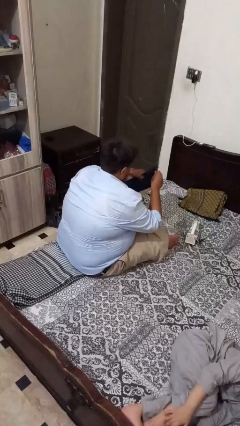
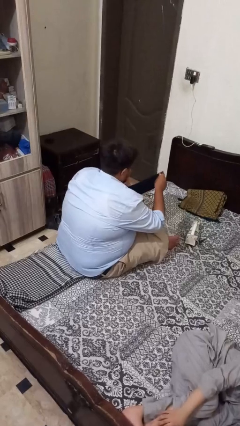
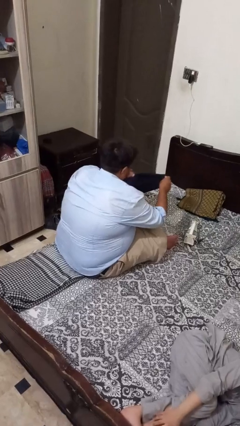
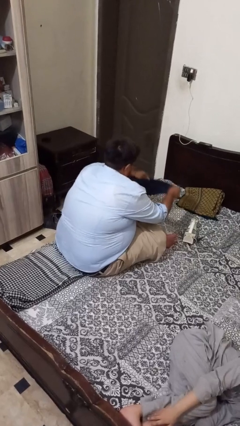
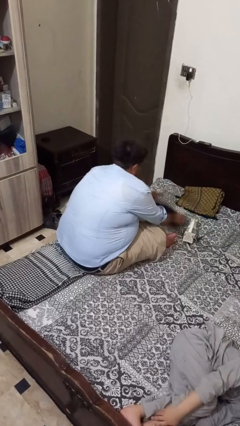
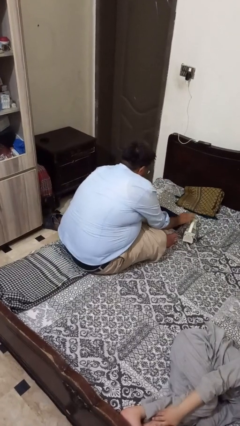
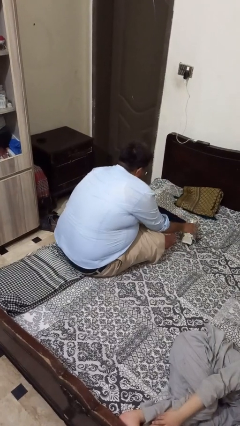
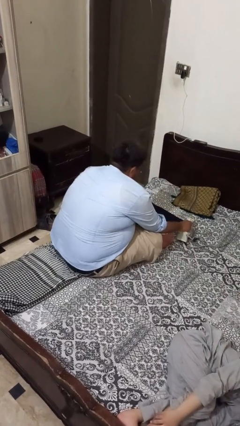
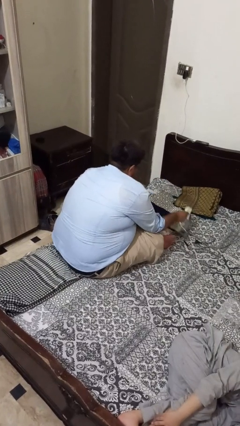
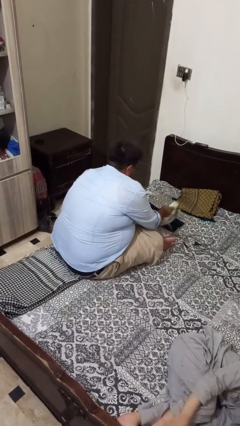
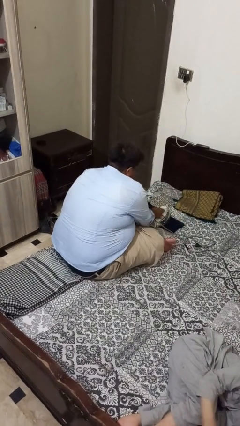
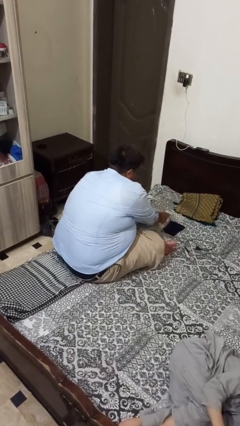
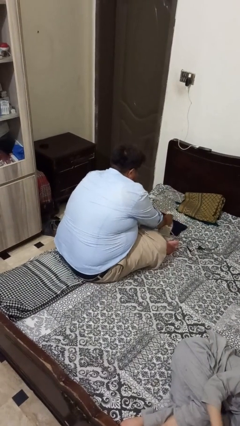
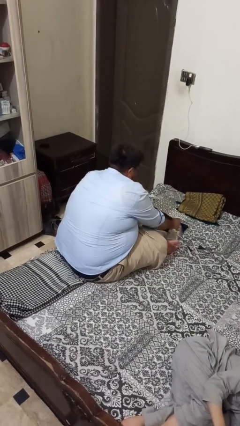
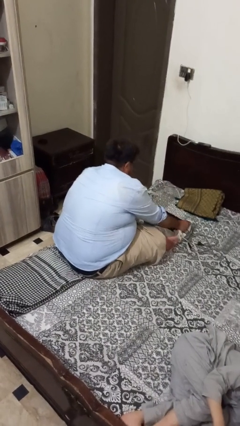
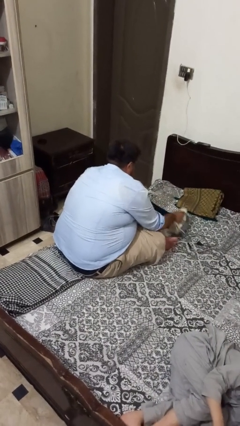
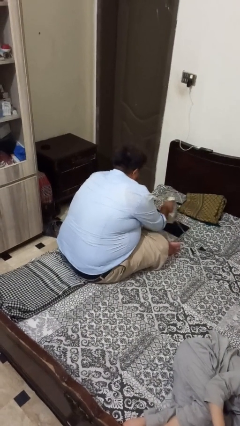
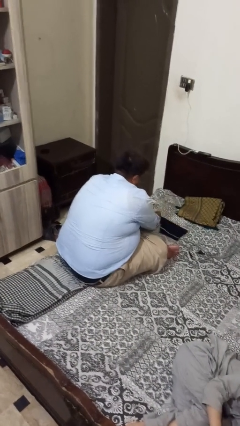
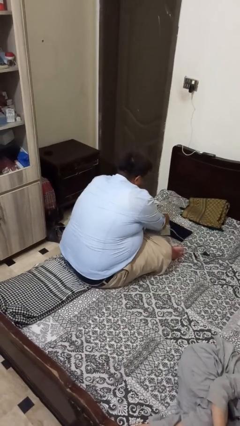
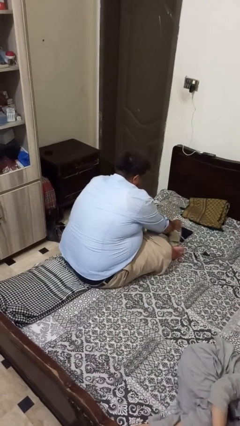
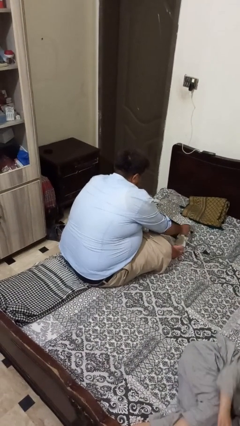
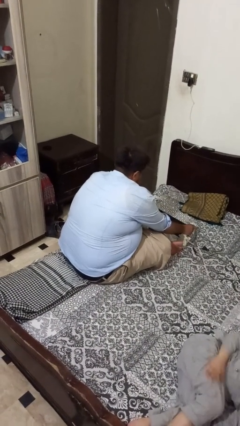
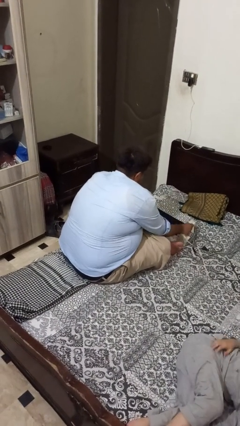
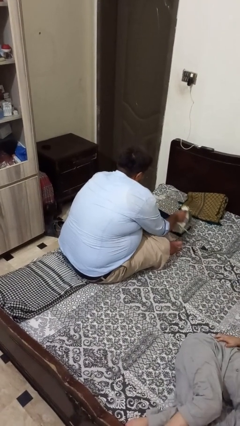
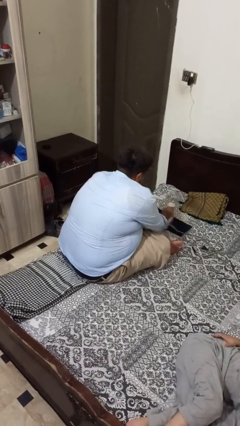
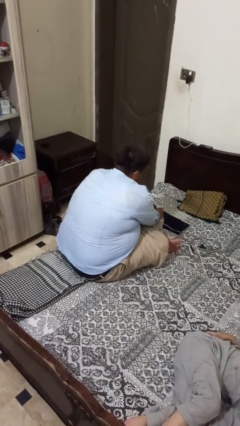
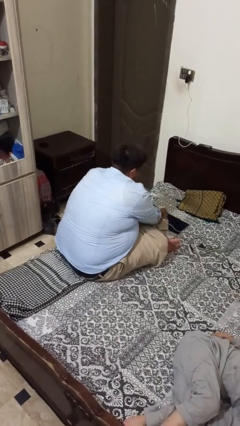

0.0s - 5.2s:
person irons clothes

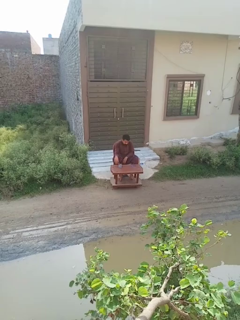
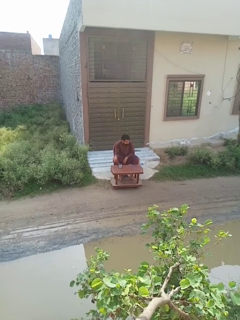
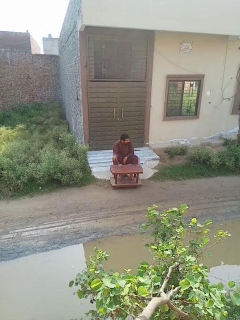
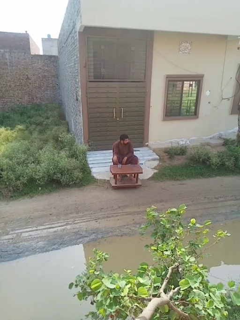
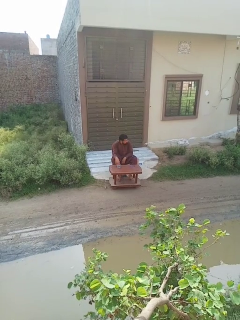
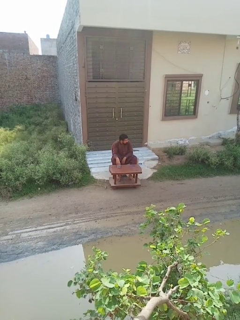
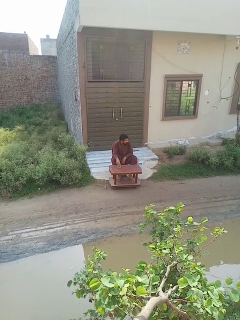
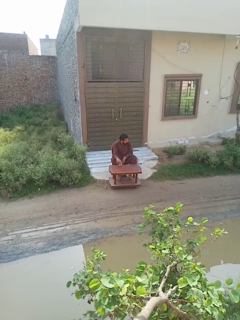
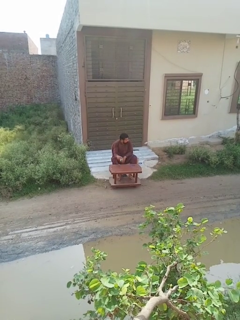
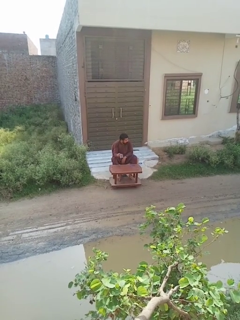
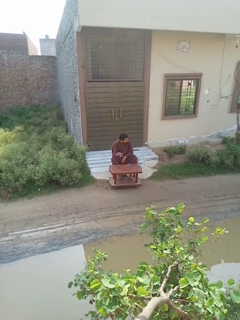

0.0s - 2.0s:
person picks up object from table

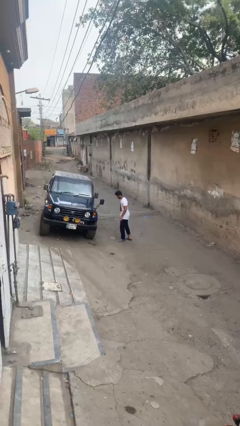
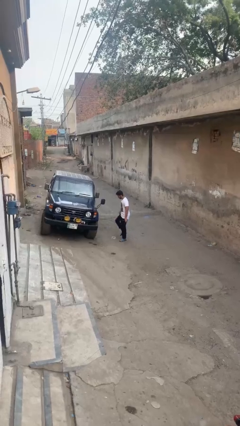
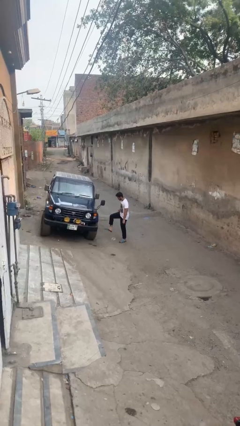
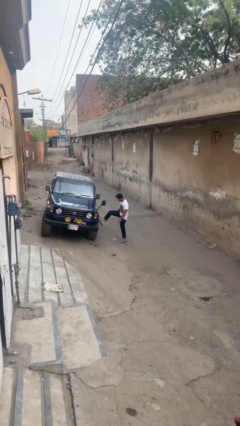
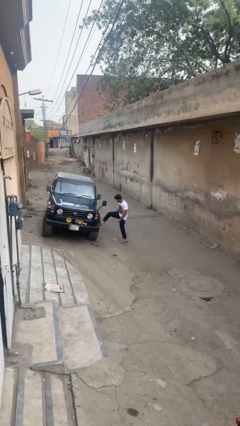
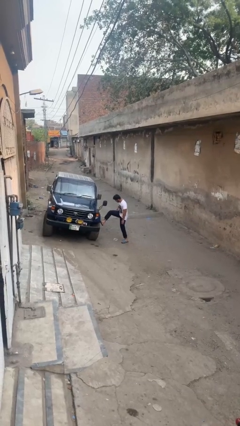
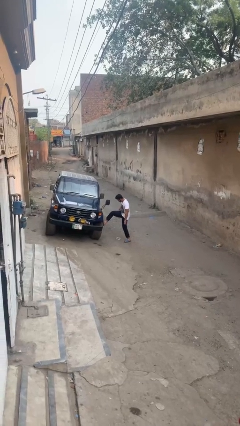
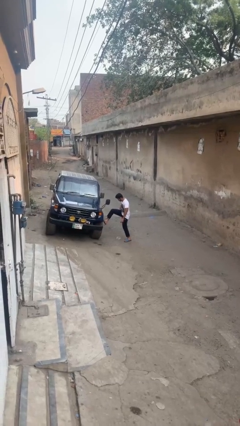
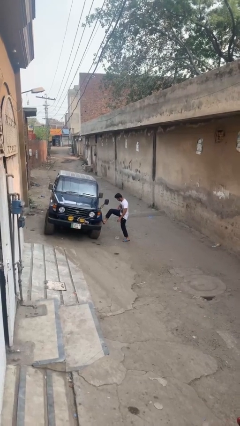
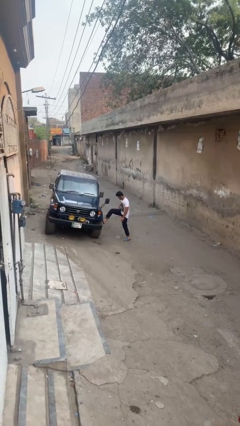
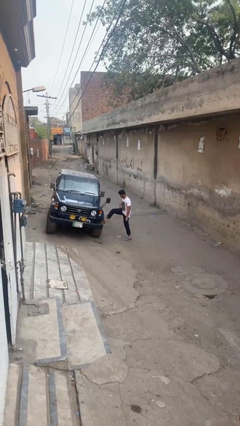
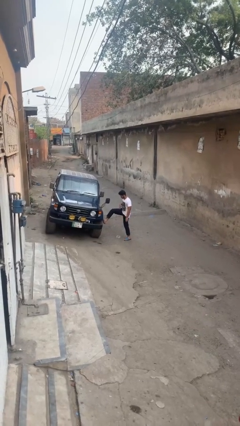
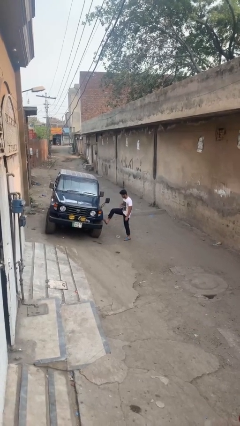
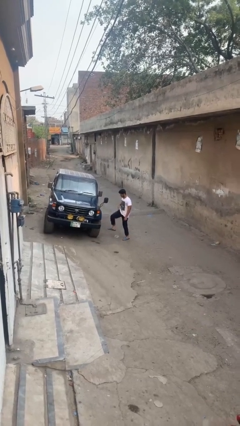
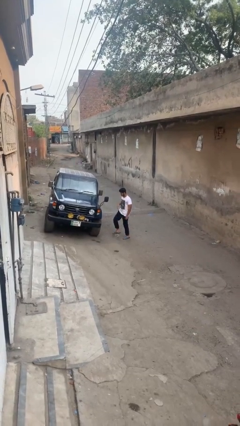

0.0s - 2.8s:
person kicks car tires

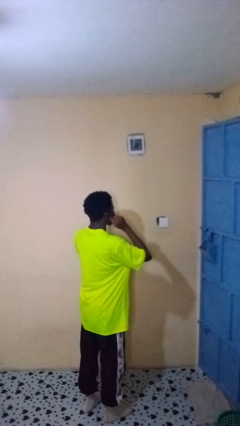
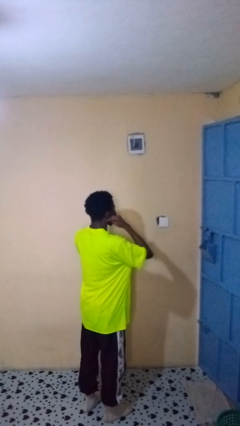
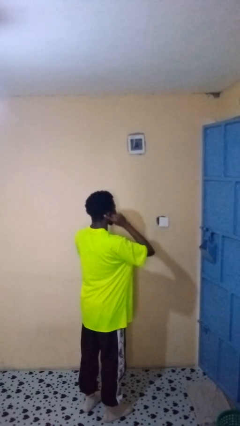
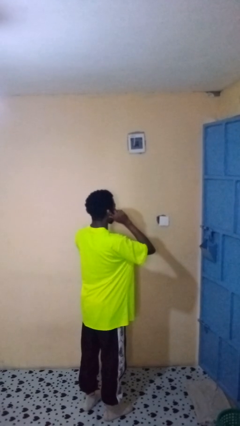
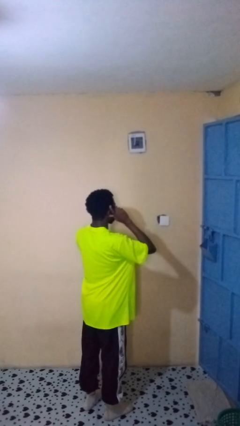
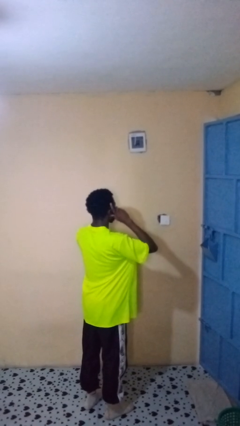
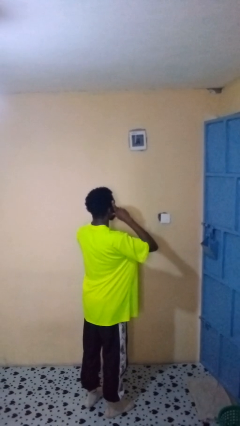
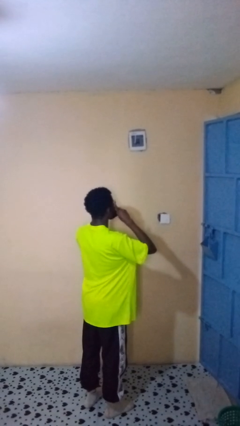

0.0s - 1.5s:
person takes off facemask

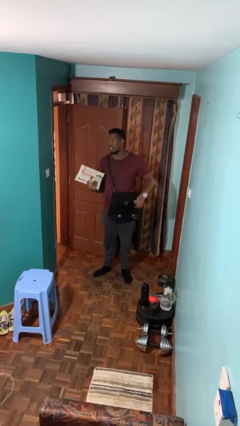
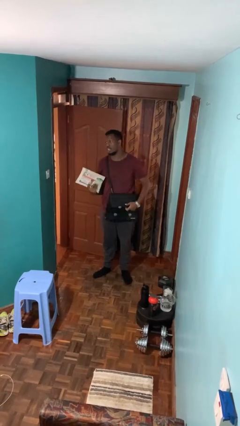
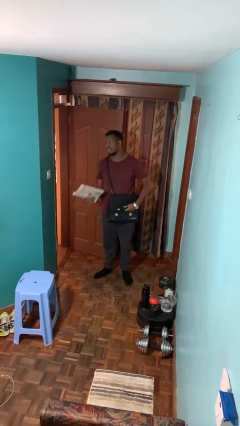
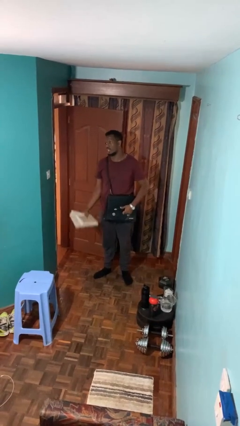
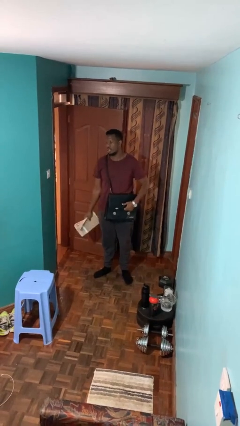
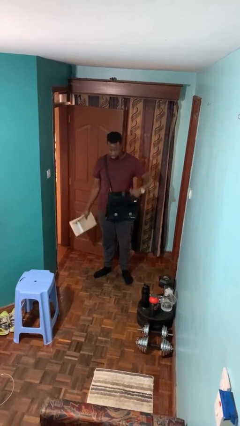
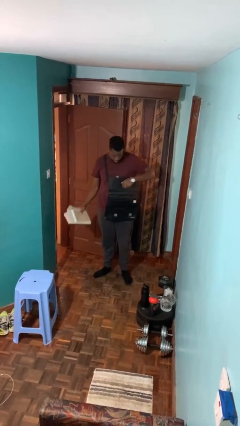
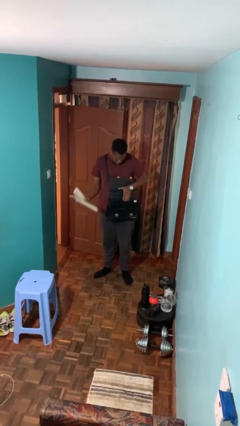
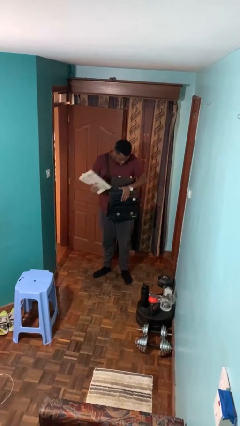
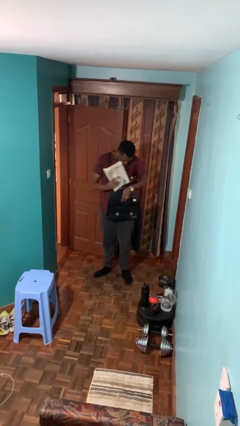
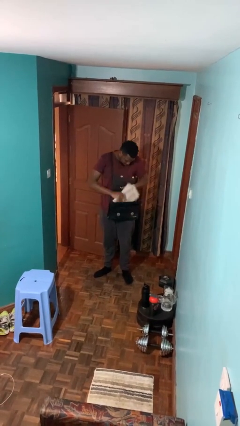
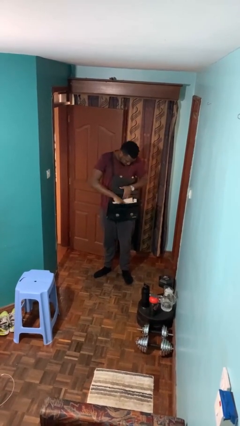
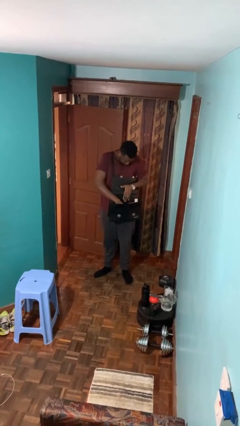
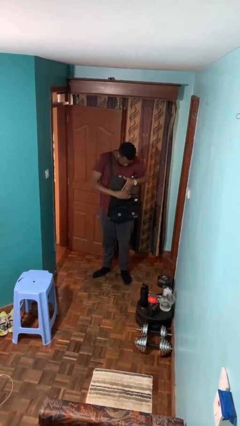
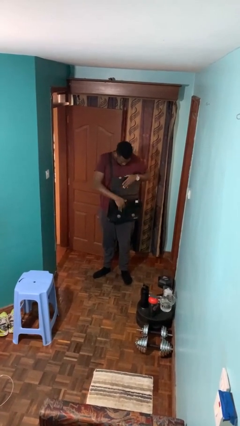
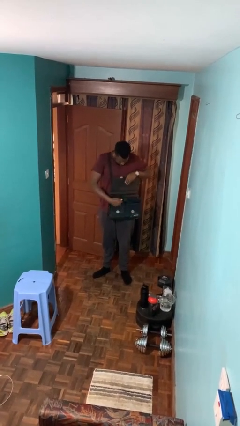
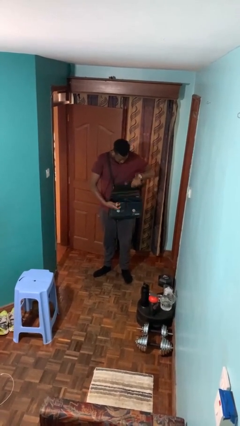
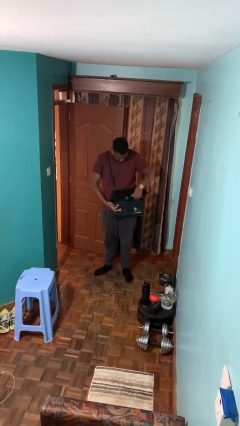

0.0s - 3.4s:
person puts object into purse

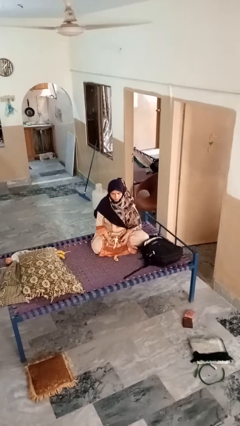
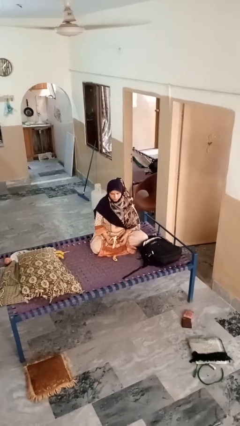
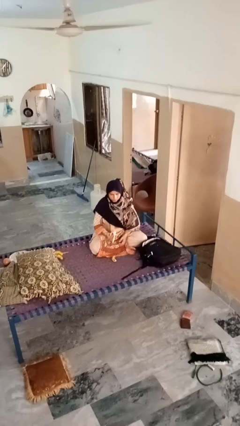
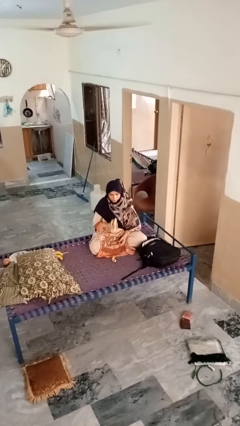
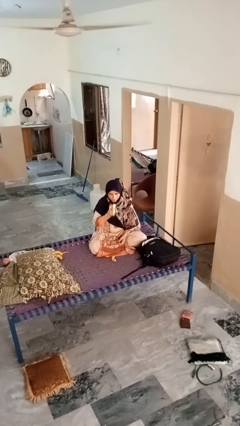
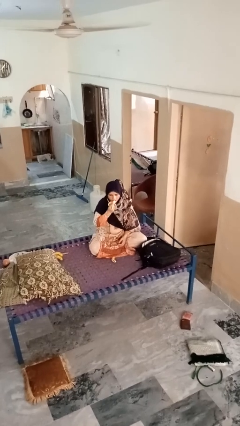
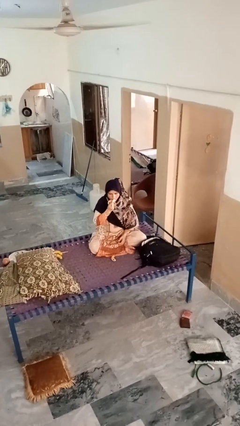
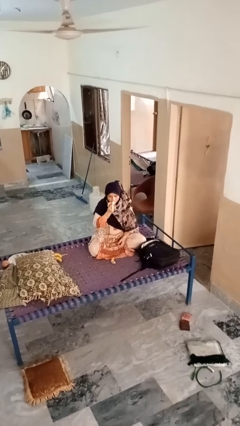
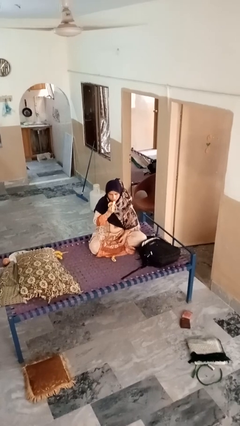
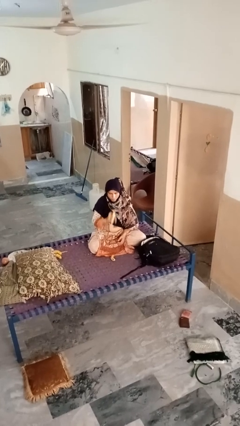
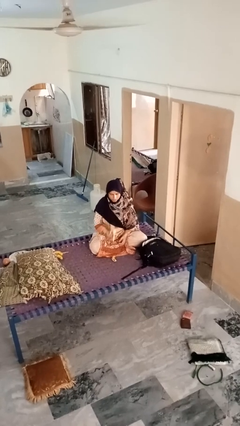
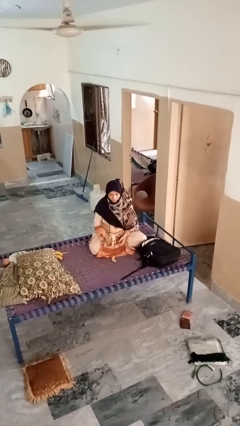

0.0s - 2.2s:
person eats banana

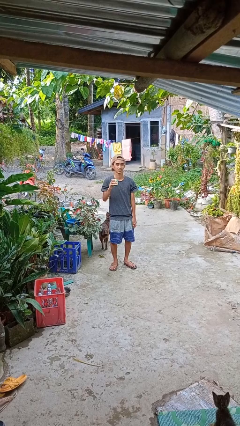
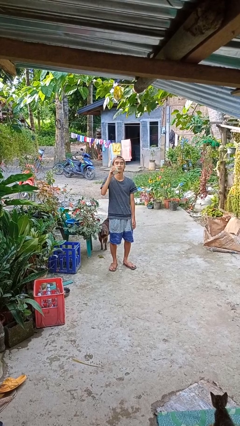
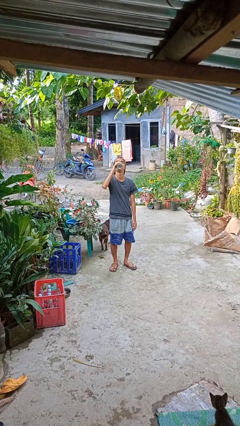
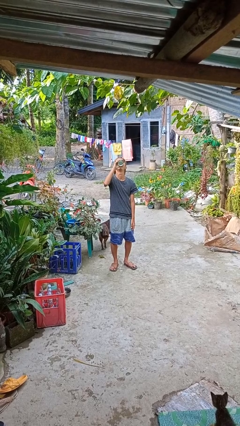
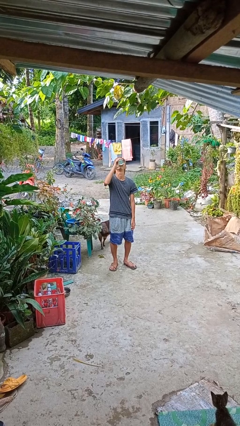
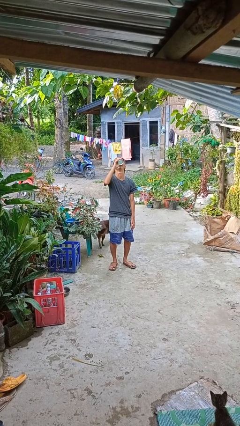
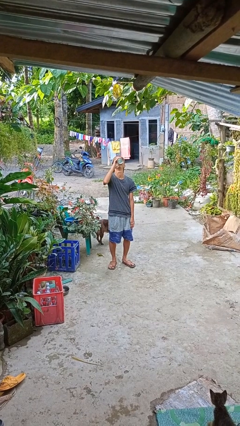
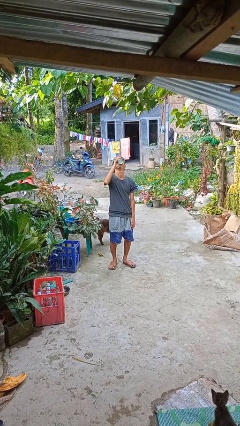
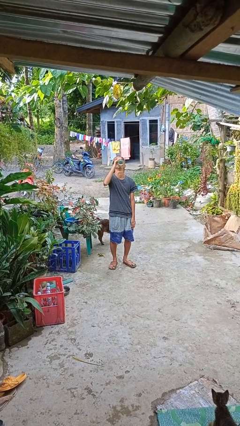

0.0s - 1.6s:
person drinks from beverage can
